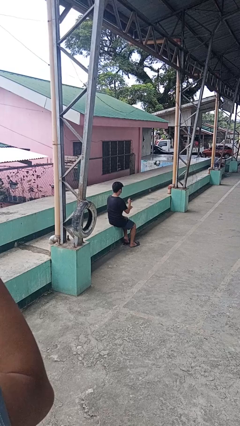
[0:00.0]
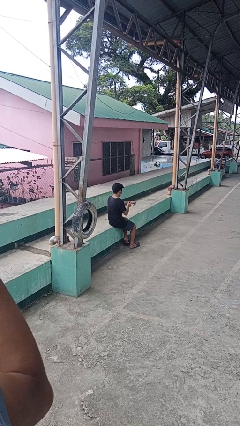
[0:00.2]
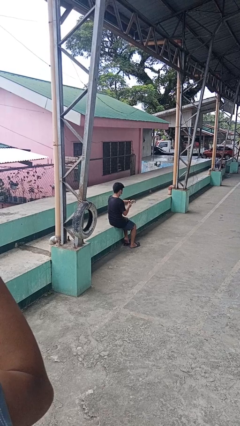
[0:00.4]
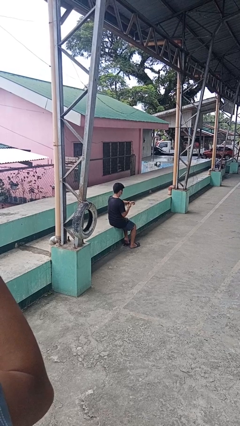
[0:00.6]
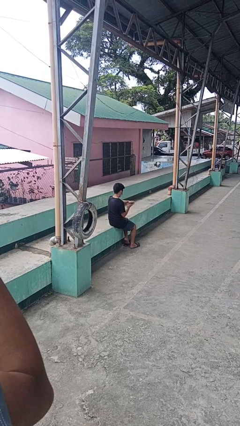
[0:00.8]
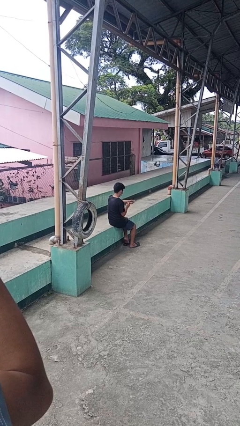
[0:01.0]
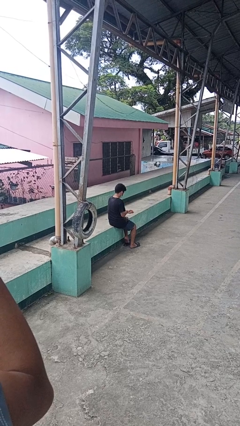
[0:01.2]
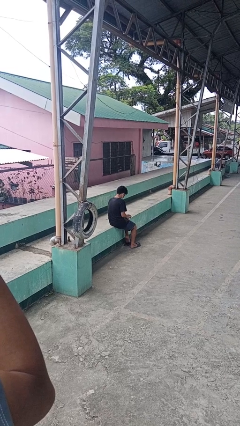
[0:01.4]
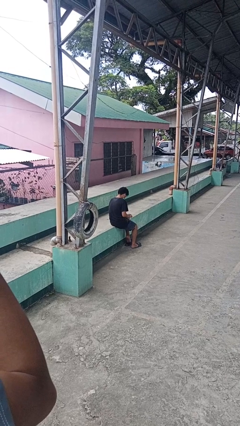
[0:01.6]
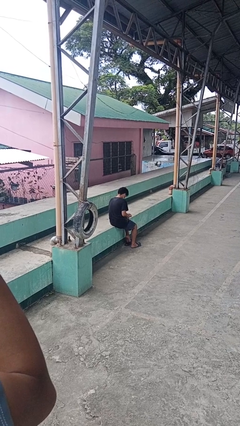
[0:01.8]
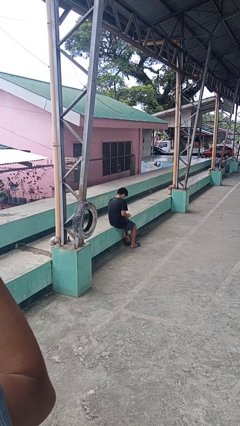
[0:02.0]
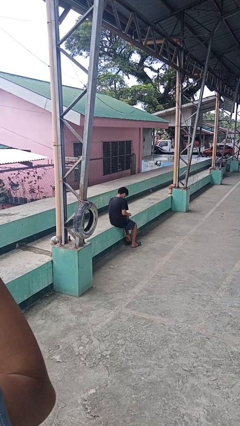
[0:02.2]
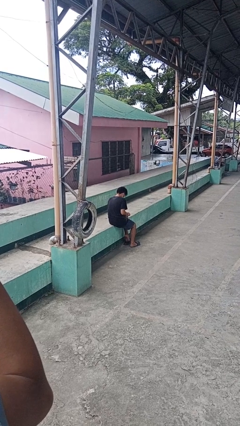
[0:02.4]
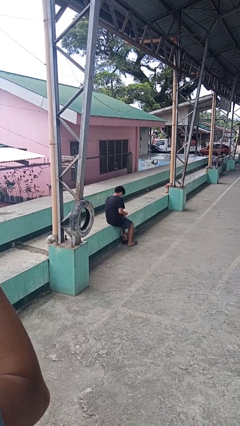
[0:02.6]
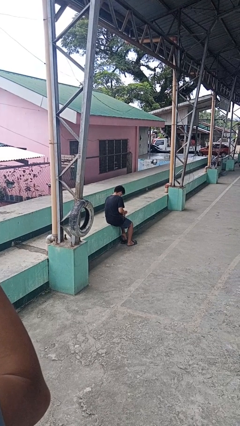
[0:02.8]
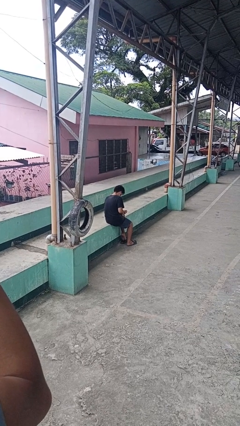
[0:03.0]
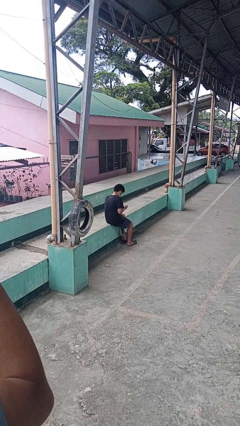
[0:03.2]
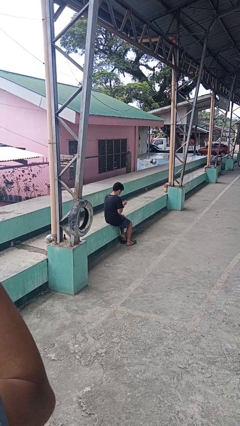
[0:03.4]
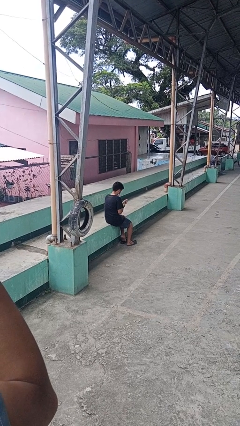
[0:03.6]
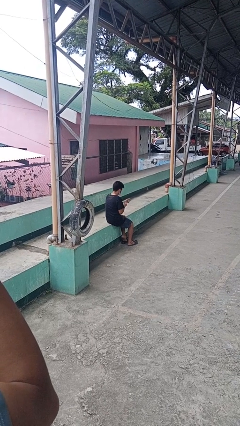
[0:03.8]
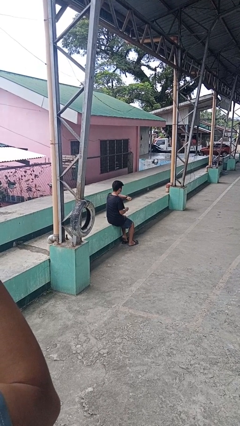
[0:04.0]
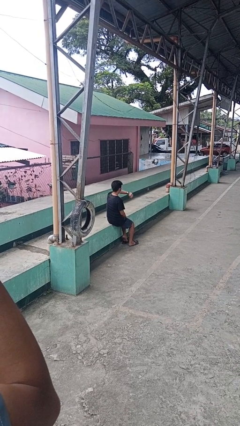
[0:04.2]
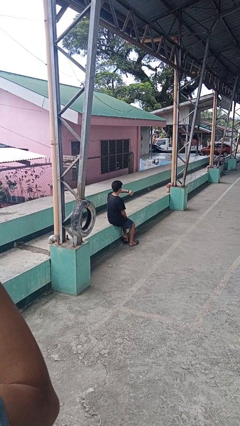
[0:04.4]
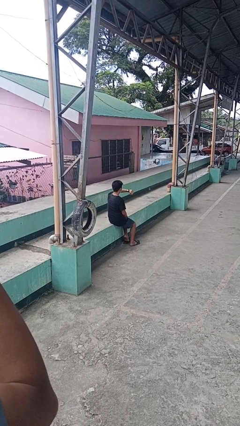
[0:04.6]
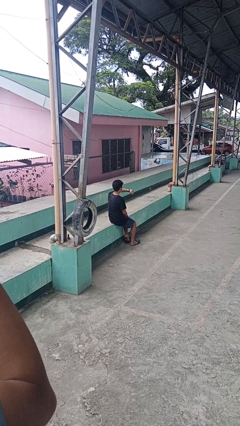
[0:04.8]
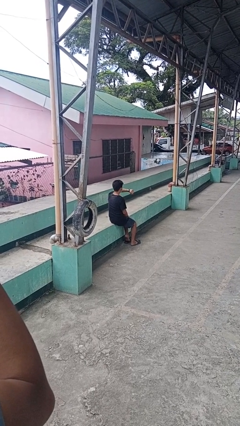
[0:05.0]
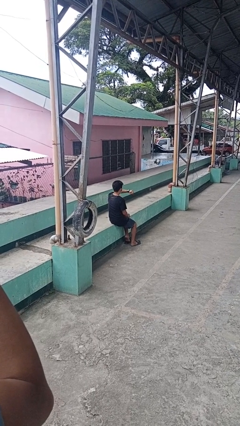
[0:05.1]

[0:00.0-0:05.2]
person puts on wristwatch

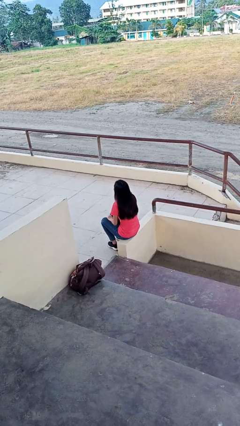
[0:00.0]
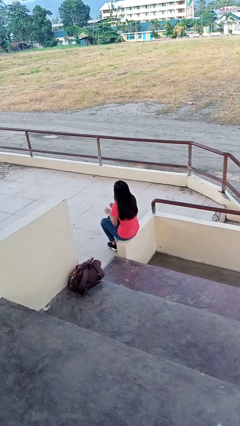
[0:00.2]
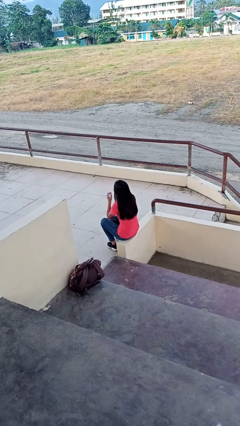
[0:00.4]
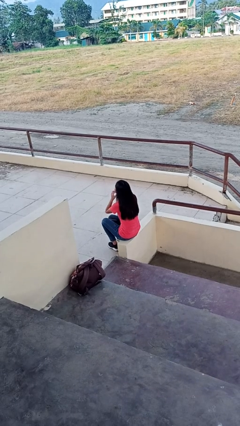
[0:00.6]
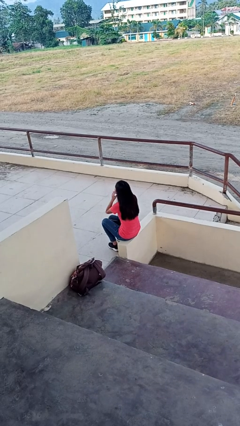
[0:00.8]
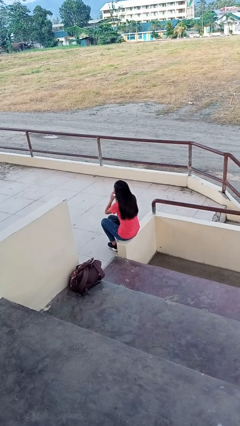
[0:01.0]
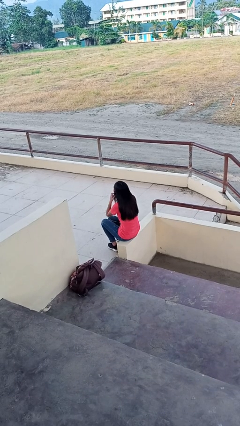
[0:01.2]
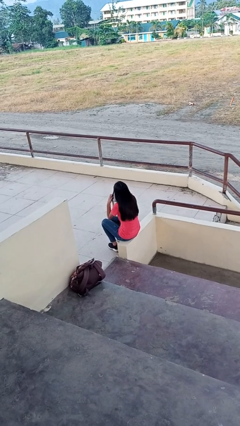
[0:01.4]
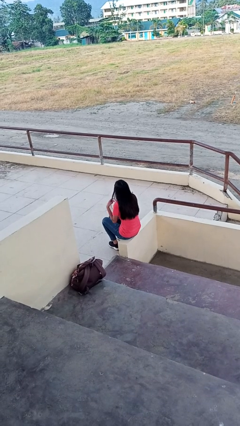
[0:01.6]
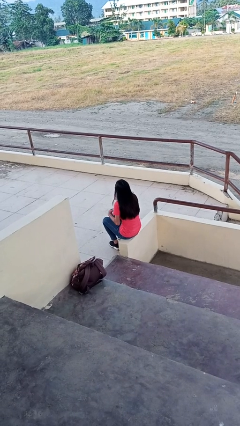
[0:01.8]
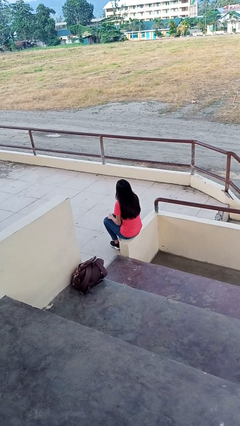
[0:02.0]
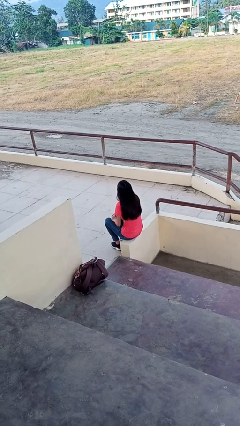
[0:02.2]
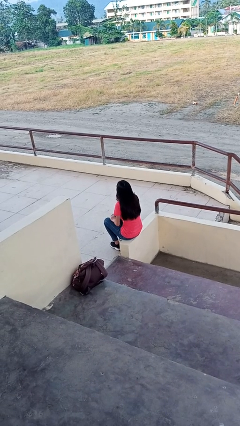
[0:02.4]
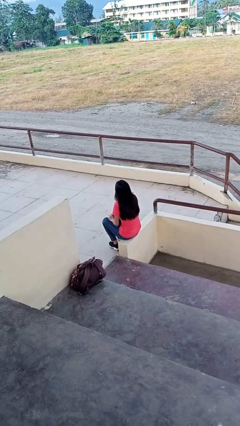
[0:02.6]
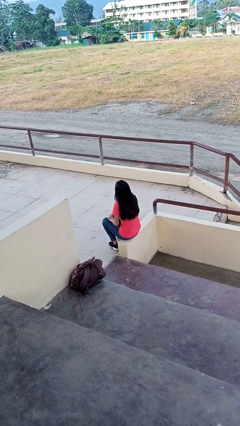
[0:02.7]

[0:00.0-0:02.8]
person takes off headphones

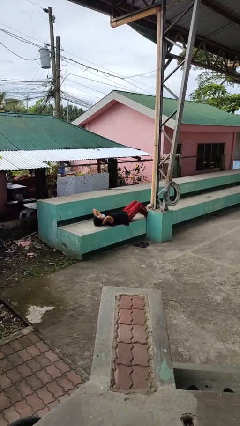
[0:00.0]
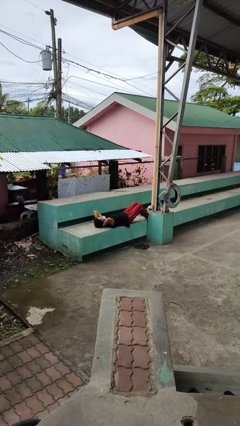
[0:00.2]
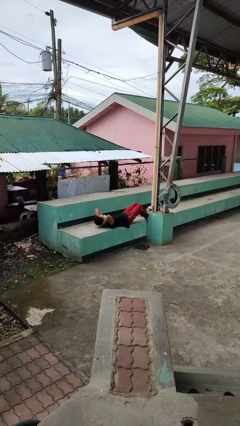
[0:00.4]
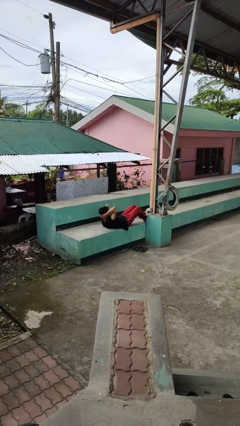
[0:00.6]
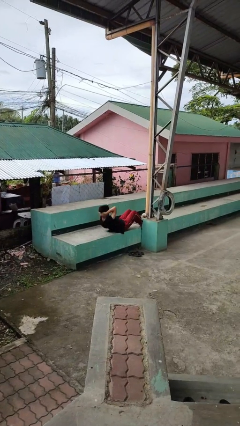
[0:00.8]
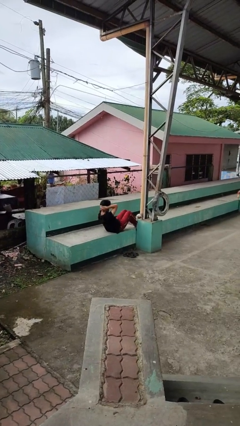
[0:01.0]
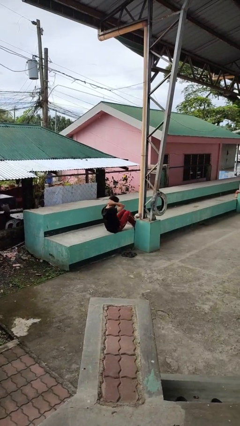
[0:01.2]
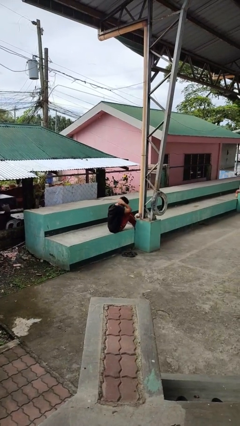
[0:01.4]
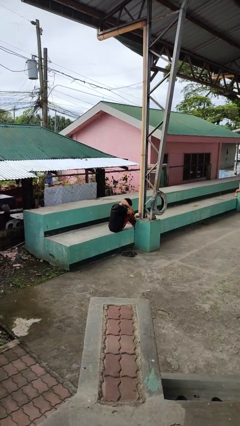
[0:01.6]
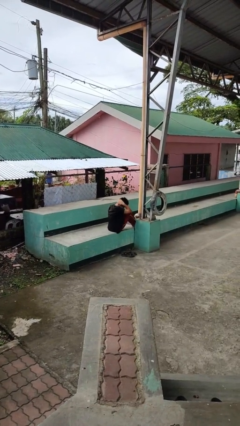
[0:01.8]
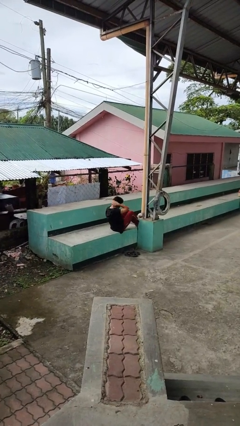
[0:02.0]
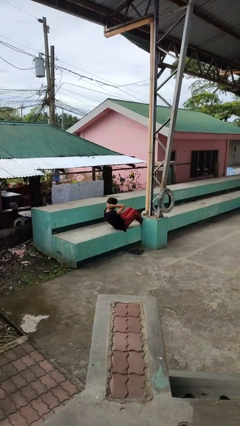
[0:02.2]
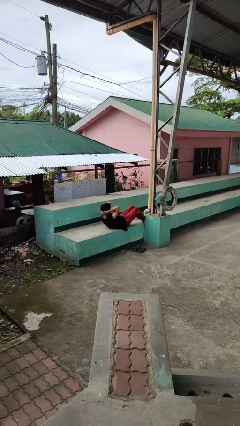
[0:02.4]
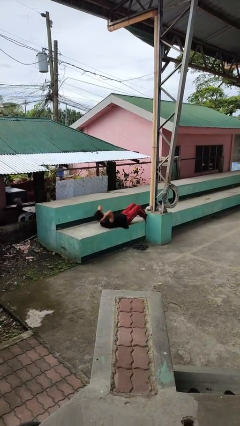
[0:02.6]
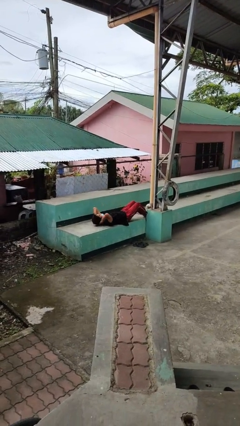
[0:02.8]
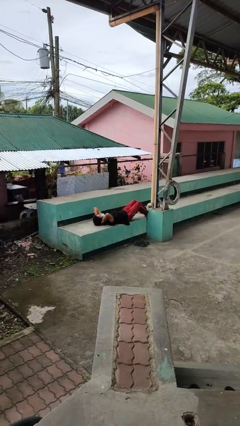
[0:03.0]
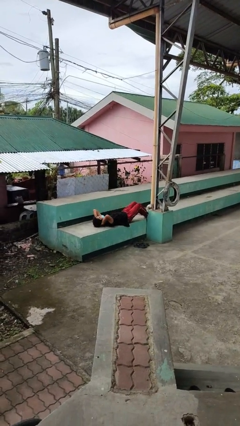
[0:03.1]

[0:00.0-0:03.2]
person exercises with situp

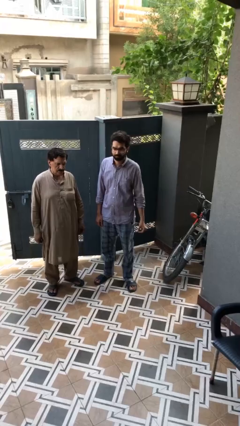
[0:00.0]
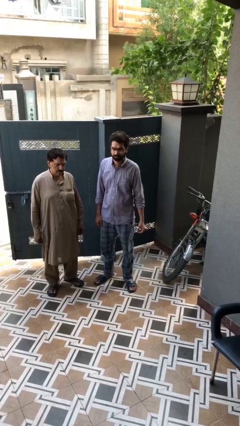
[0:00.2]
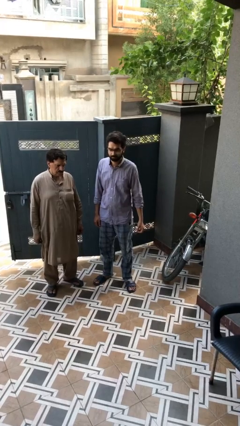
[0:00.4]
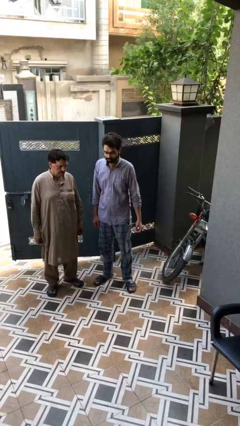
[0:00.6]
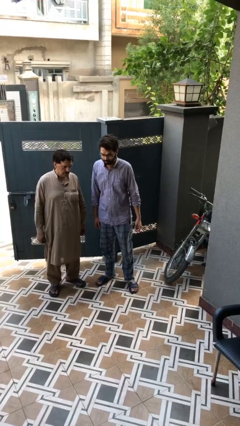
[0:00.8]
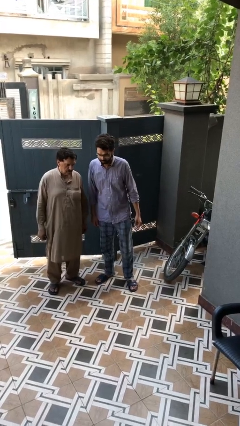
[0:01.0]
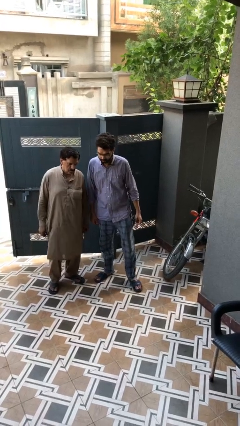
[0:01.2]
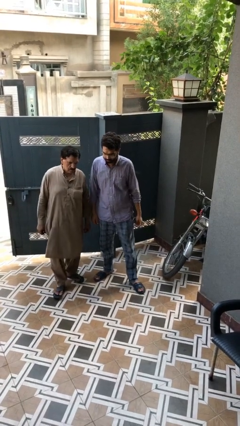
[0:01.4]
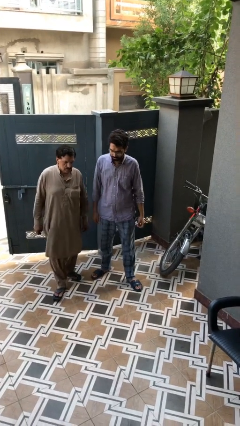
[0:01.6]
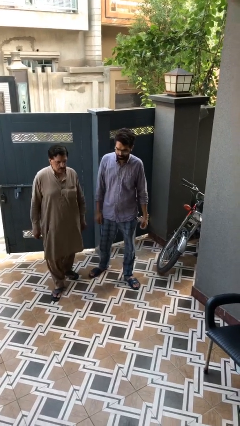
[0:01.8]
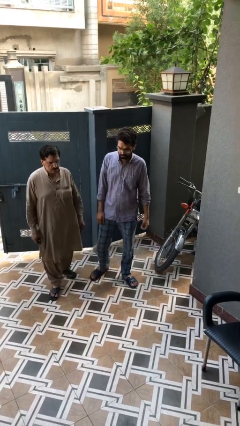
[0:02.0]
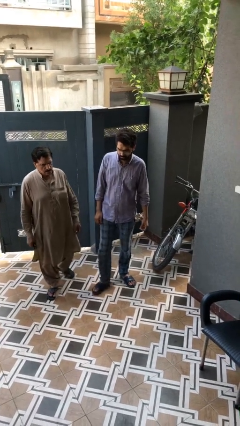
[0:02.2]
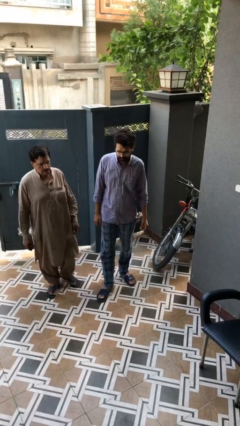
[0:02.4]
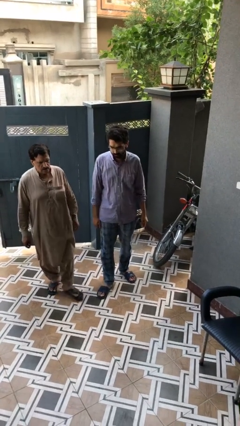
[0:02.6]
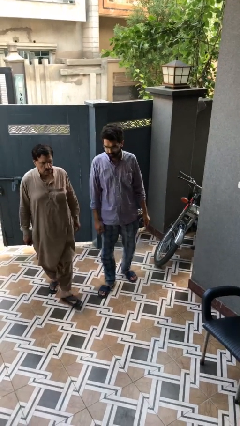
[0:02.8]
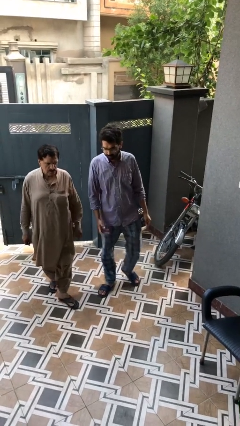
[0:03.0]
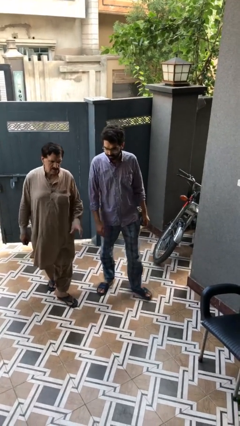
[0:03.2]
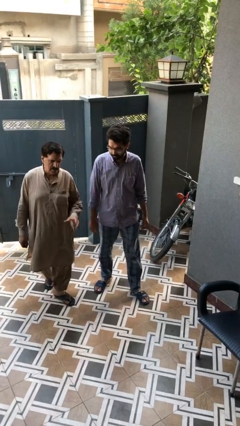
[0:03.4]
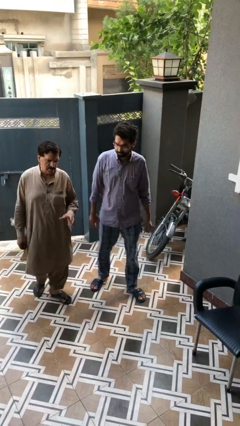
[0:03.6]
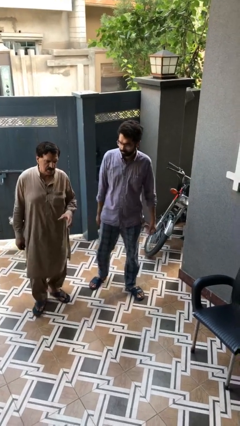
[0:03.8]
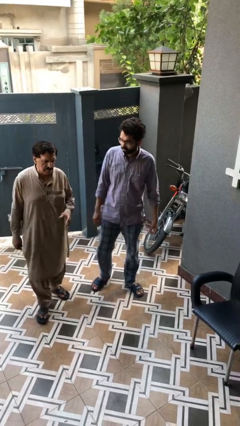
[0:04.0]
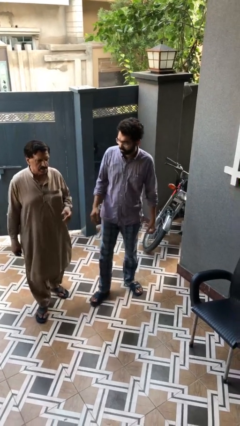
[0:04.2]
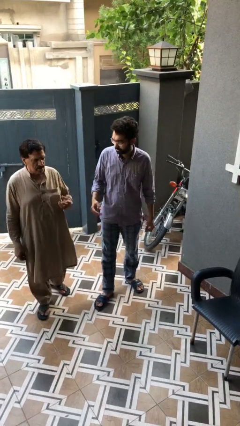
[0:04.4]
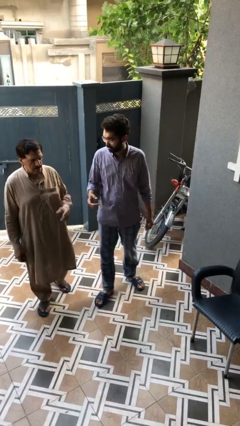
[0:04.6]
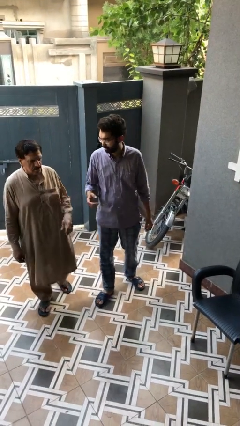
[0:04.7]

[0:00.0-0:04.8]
person talks to person

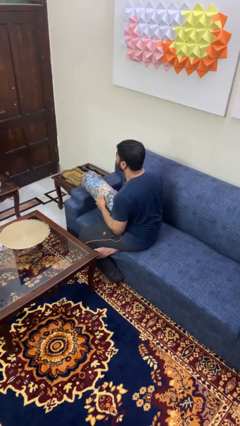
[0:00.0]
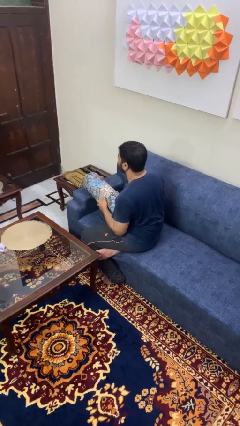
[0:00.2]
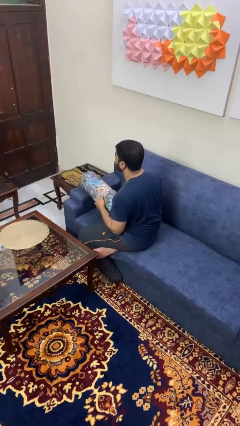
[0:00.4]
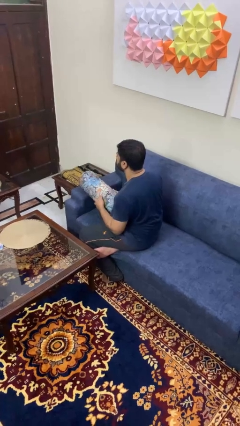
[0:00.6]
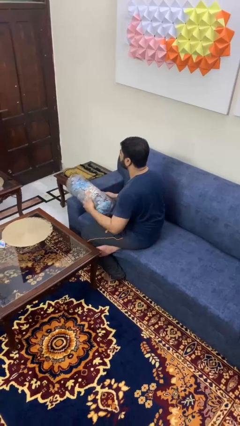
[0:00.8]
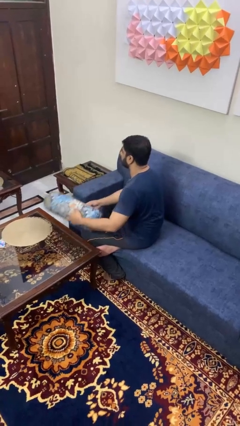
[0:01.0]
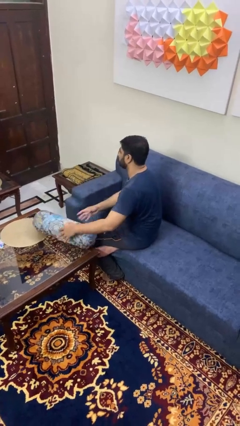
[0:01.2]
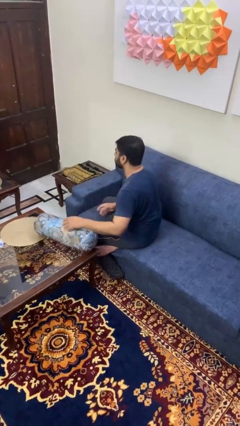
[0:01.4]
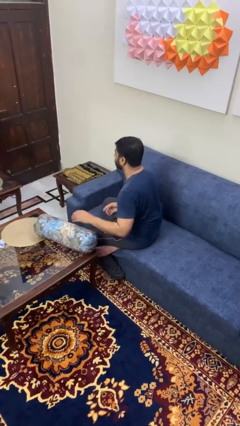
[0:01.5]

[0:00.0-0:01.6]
person throws object on table
